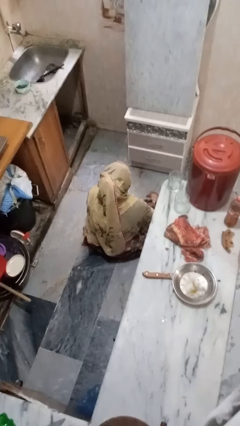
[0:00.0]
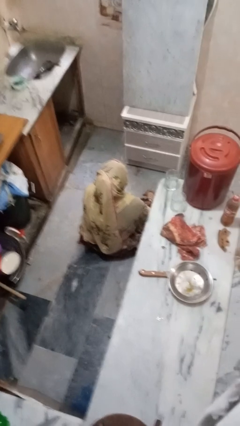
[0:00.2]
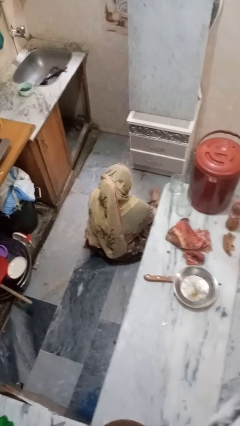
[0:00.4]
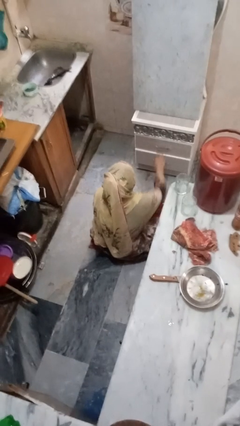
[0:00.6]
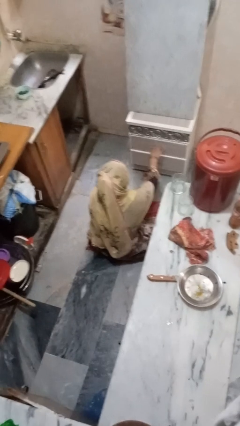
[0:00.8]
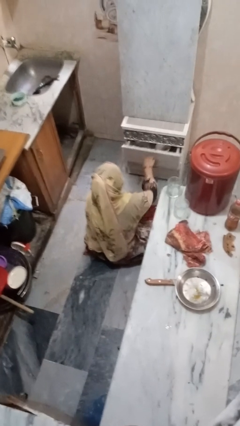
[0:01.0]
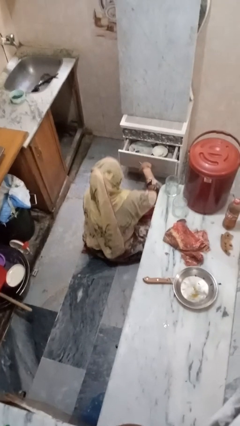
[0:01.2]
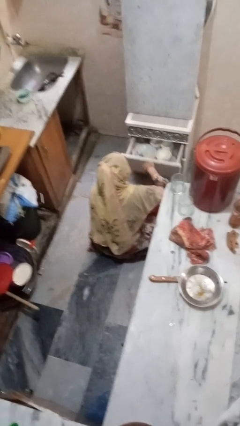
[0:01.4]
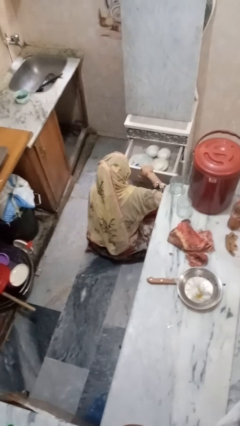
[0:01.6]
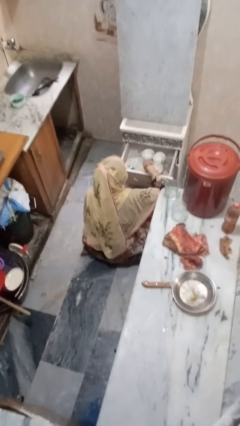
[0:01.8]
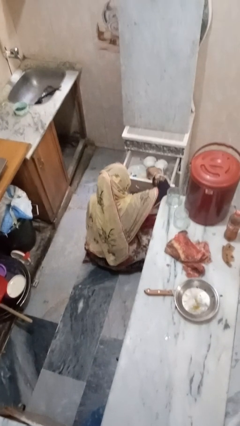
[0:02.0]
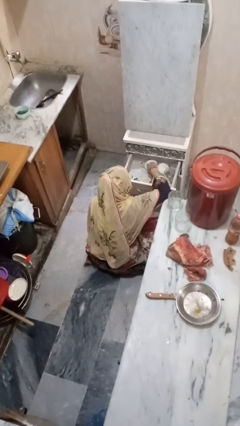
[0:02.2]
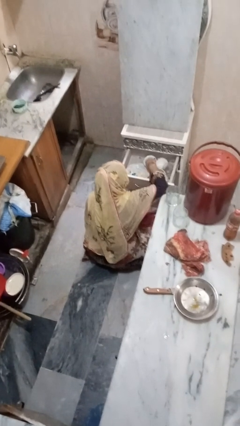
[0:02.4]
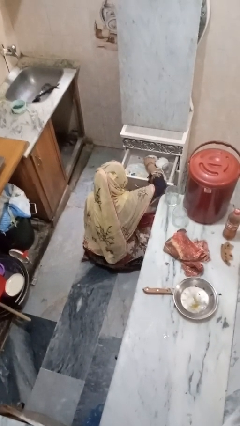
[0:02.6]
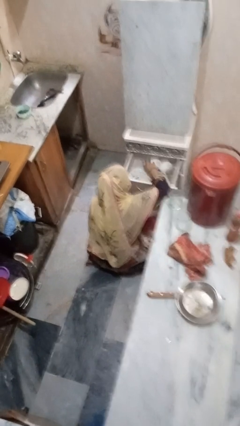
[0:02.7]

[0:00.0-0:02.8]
person searches in kitchen drawer

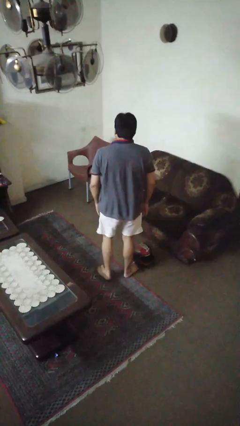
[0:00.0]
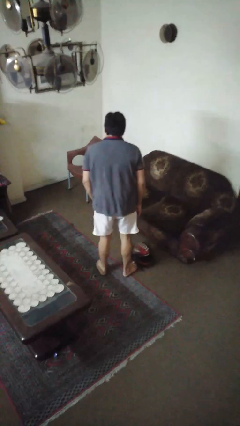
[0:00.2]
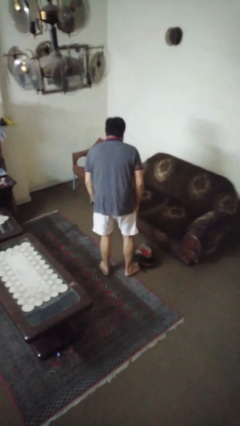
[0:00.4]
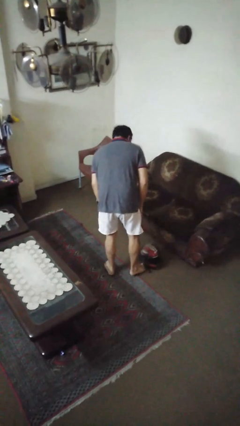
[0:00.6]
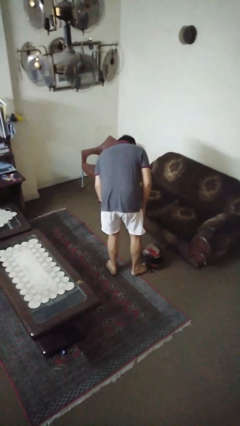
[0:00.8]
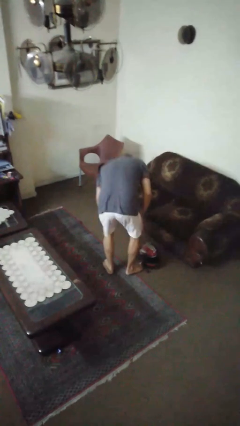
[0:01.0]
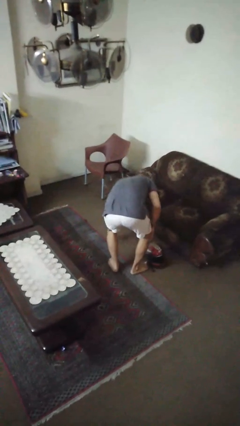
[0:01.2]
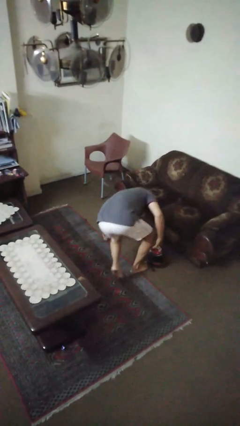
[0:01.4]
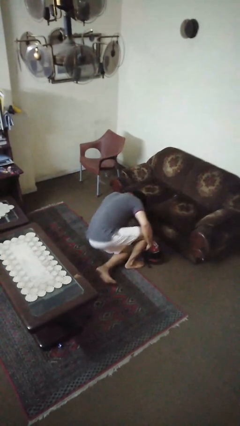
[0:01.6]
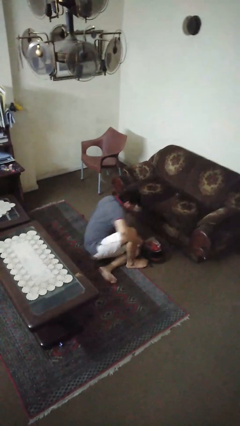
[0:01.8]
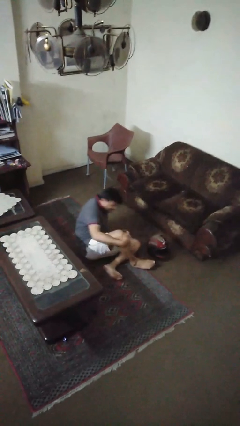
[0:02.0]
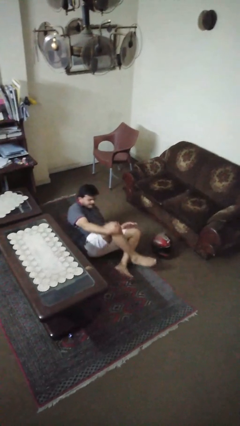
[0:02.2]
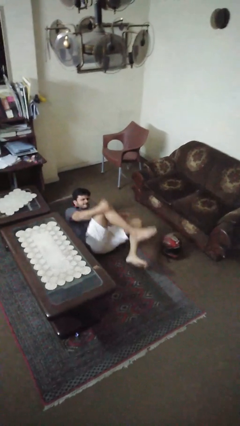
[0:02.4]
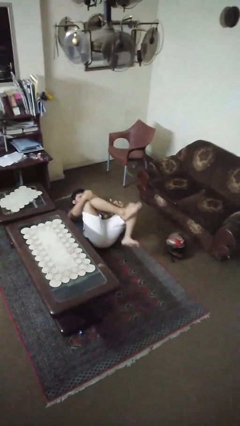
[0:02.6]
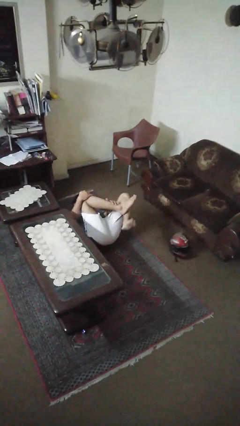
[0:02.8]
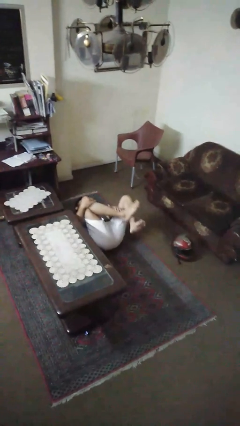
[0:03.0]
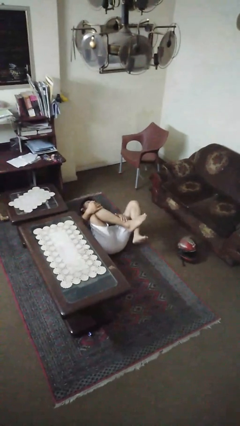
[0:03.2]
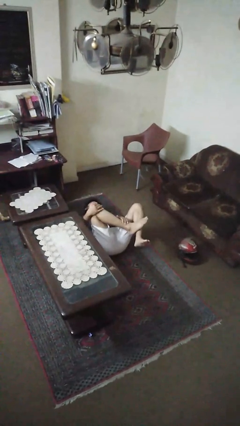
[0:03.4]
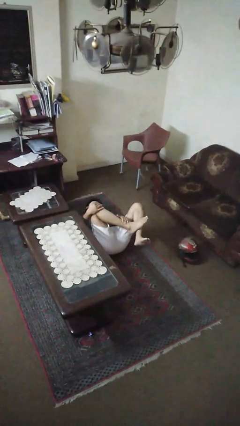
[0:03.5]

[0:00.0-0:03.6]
person lies down on floor

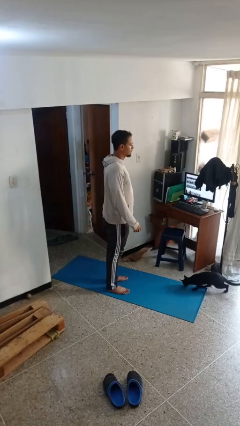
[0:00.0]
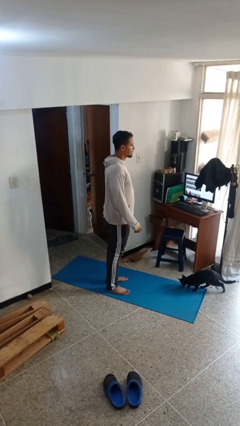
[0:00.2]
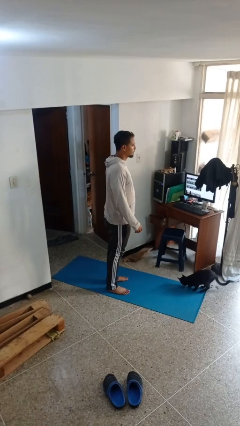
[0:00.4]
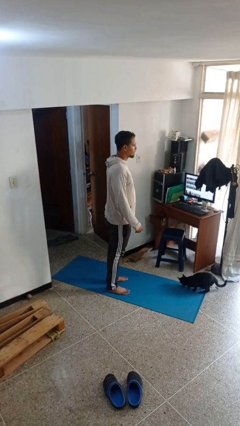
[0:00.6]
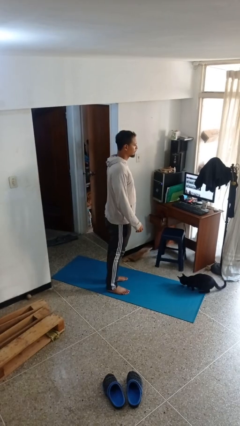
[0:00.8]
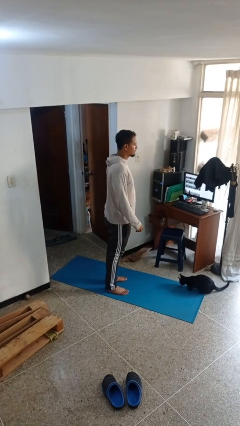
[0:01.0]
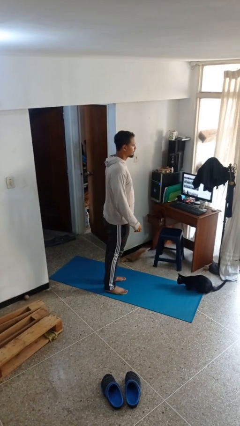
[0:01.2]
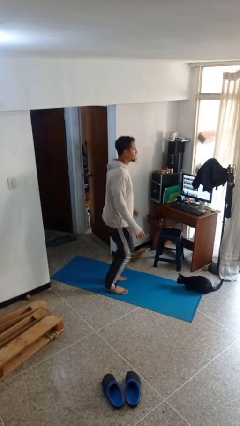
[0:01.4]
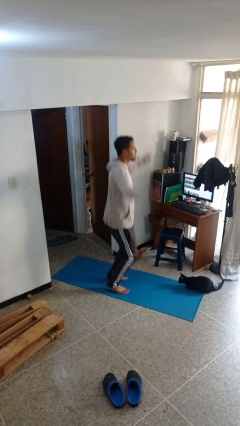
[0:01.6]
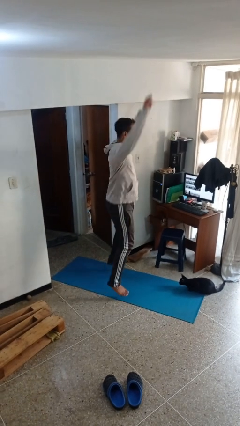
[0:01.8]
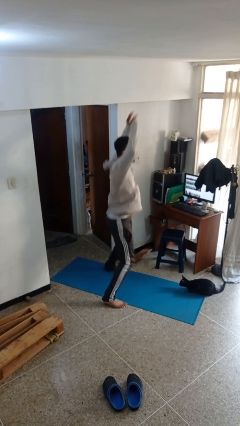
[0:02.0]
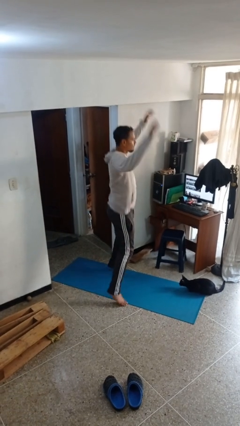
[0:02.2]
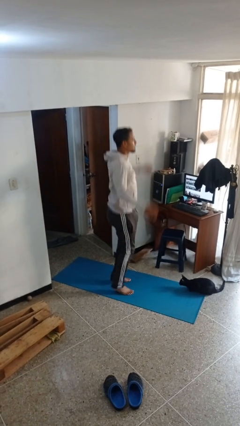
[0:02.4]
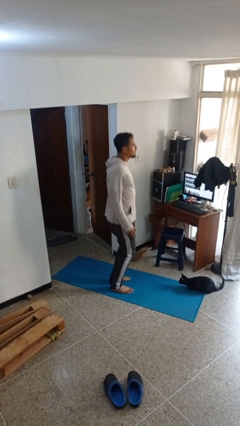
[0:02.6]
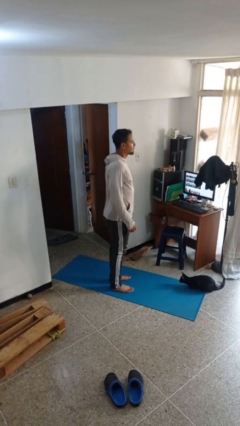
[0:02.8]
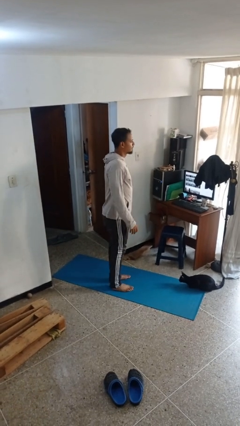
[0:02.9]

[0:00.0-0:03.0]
person exercises with jumping jacks

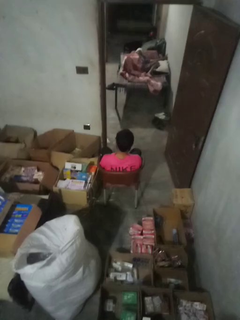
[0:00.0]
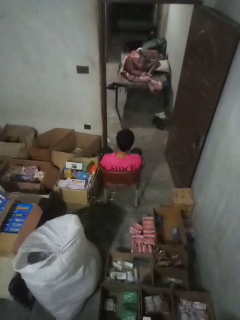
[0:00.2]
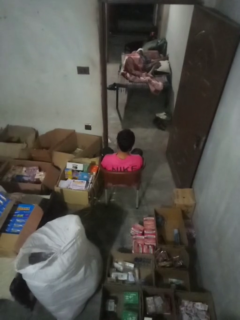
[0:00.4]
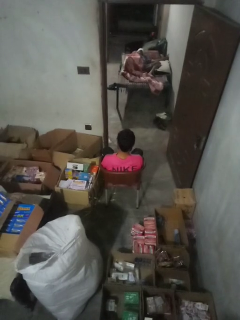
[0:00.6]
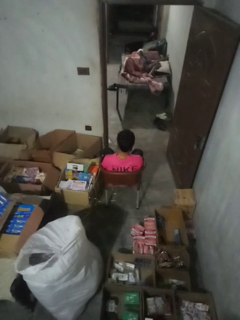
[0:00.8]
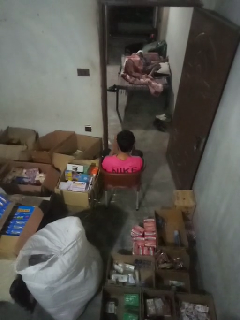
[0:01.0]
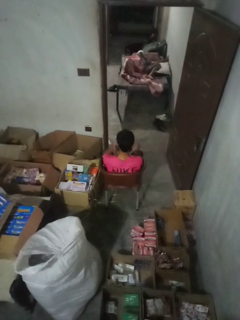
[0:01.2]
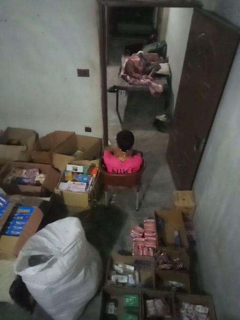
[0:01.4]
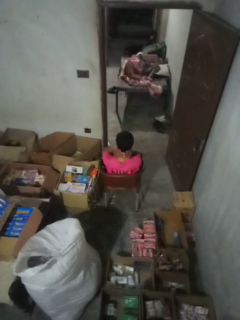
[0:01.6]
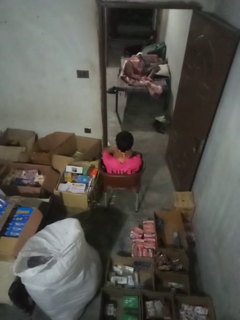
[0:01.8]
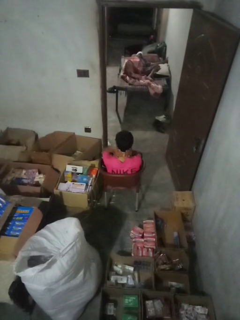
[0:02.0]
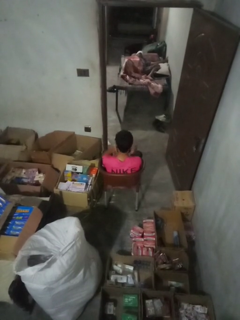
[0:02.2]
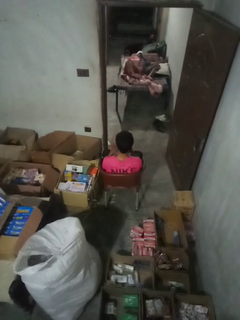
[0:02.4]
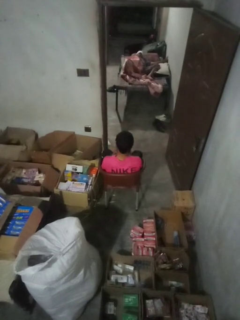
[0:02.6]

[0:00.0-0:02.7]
person rubs neck

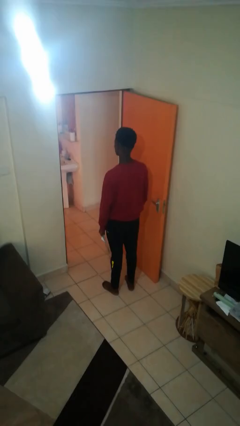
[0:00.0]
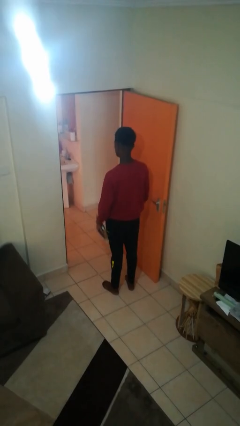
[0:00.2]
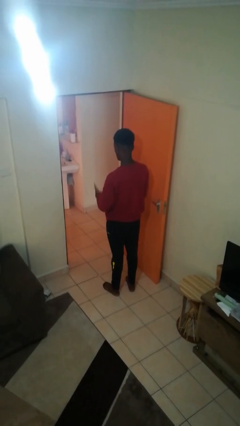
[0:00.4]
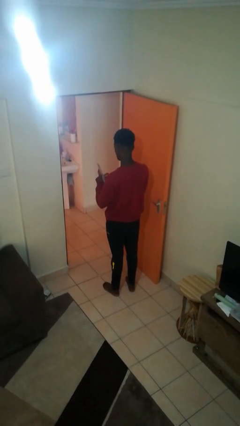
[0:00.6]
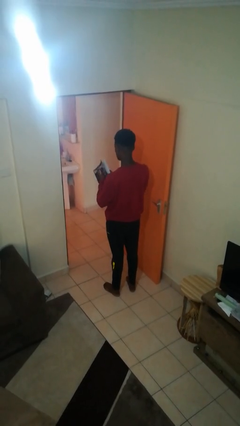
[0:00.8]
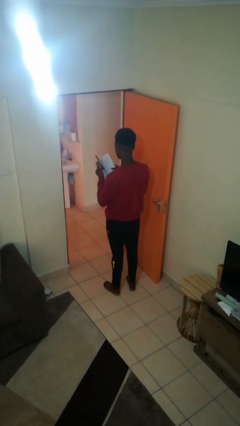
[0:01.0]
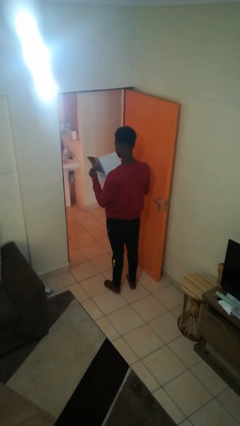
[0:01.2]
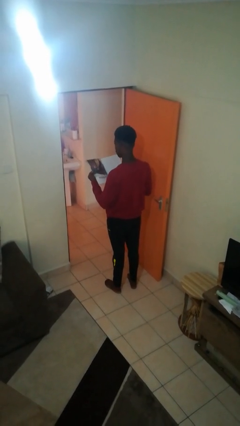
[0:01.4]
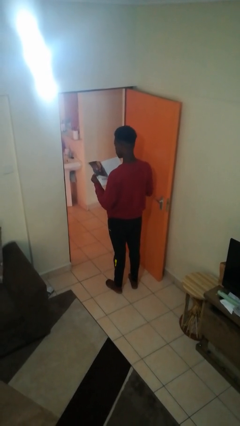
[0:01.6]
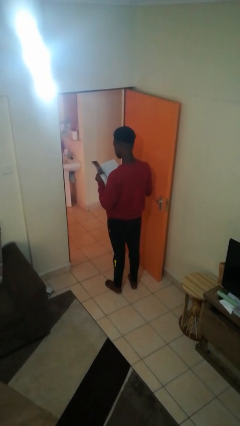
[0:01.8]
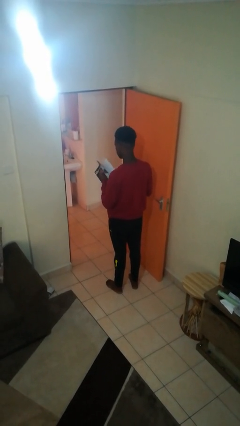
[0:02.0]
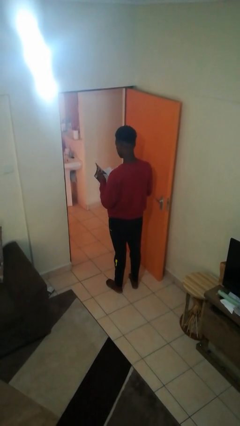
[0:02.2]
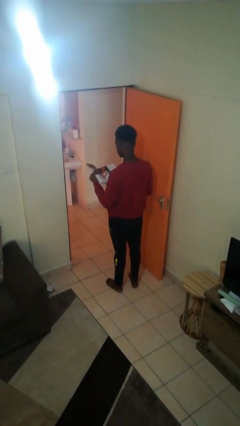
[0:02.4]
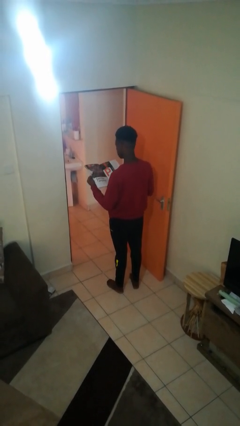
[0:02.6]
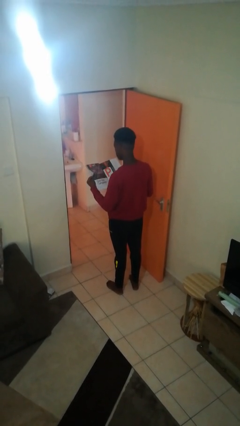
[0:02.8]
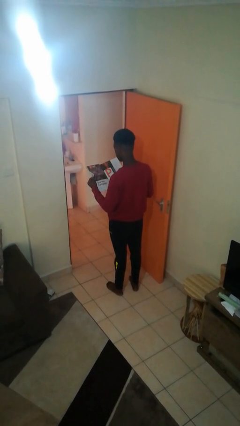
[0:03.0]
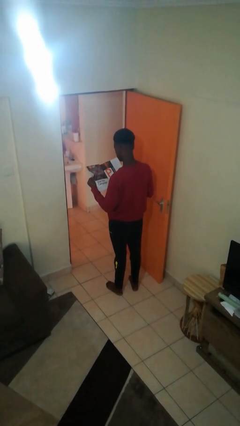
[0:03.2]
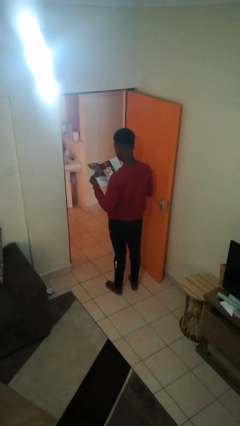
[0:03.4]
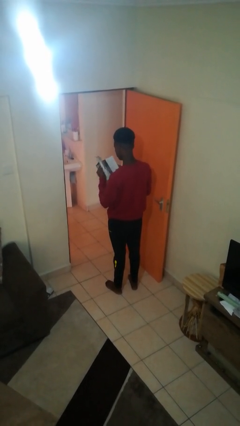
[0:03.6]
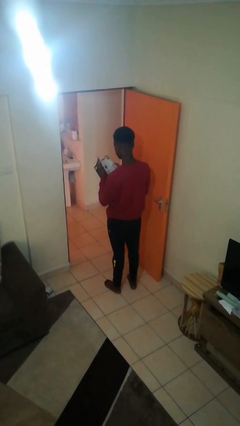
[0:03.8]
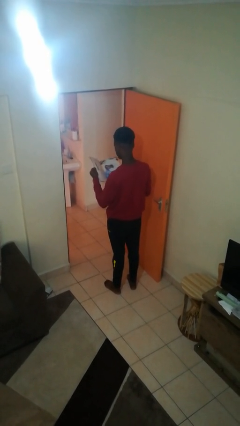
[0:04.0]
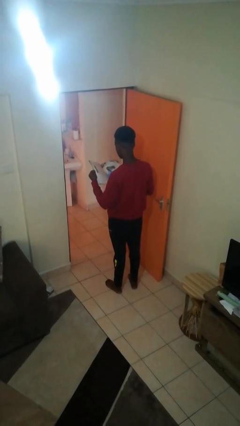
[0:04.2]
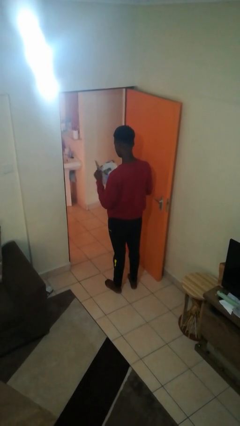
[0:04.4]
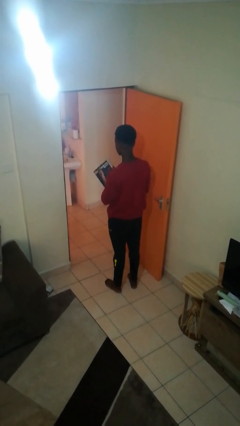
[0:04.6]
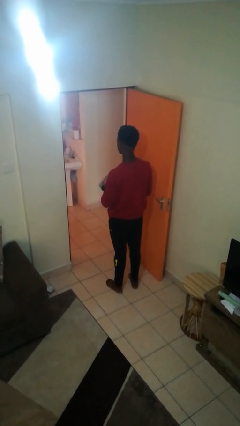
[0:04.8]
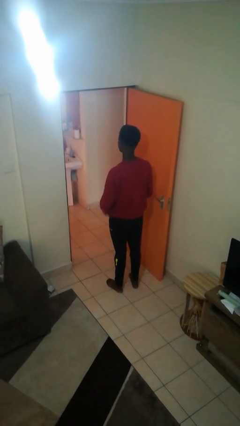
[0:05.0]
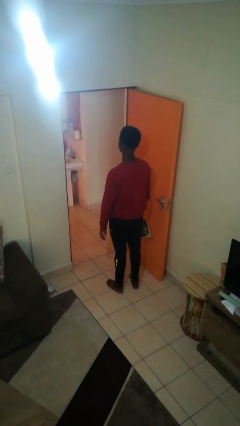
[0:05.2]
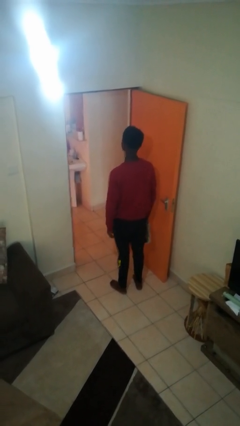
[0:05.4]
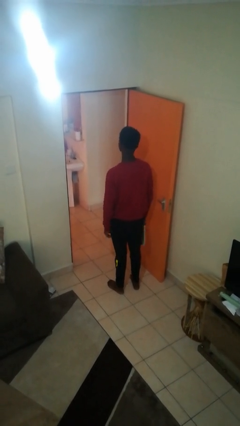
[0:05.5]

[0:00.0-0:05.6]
person reads magazine
